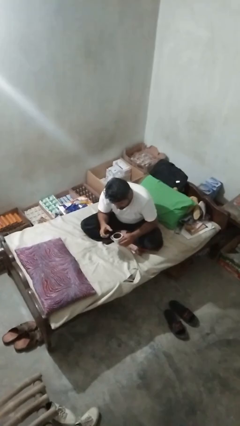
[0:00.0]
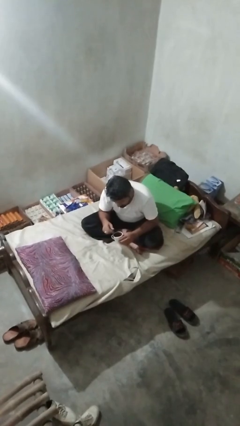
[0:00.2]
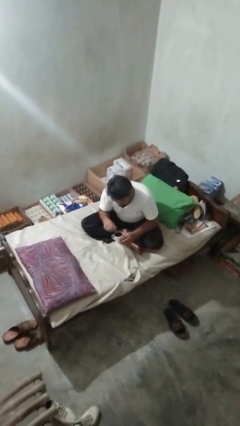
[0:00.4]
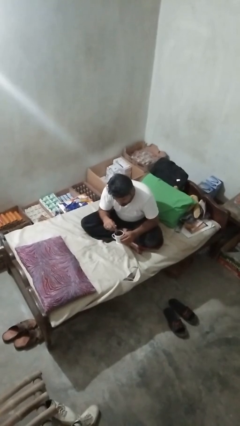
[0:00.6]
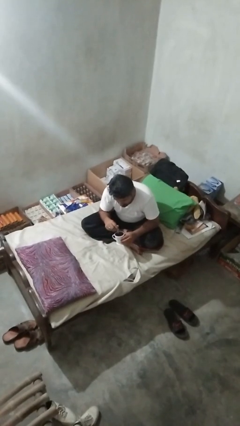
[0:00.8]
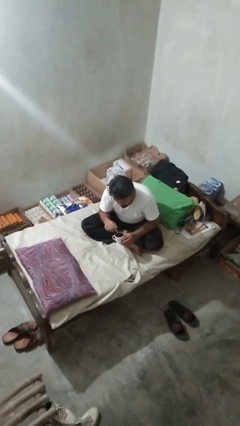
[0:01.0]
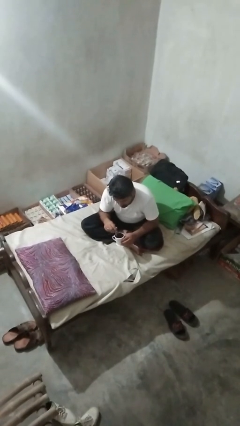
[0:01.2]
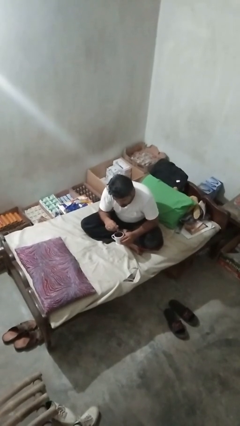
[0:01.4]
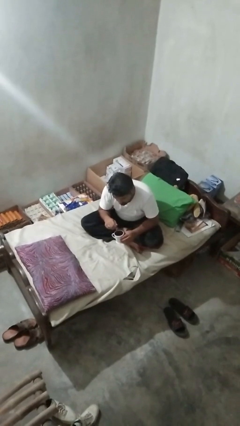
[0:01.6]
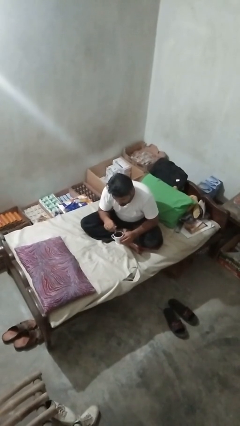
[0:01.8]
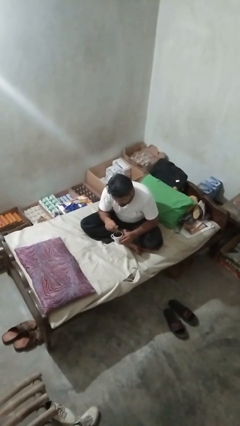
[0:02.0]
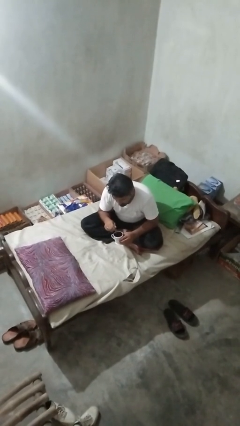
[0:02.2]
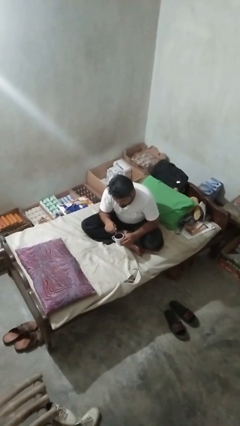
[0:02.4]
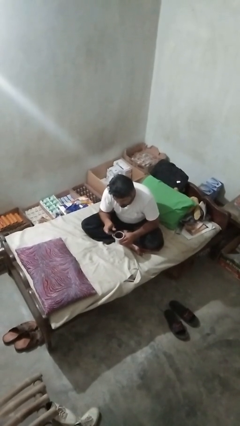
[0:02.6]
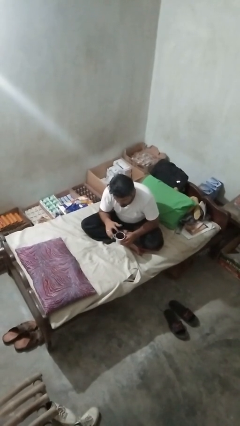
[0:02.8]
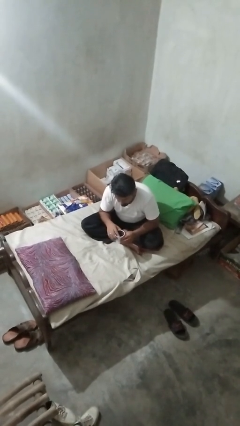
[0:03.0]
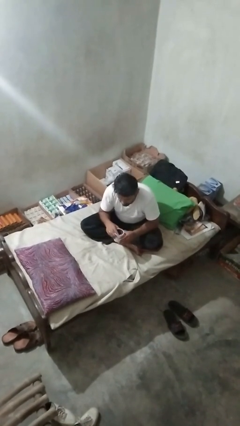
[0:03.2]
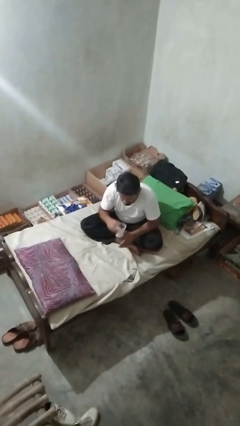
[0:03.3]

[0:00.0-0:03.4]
person stirs mug

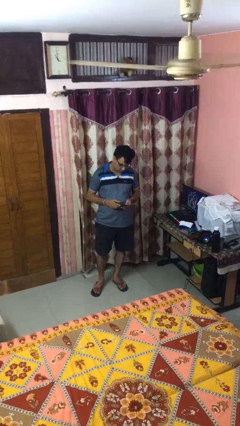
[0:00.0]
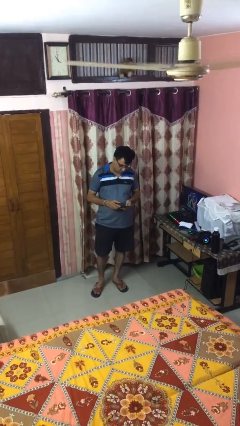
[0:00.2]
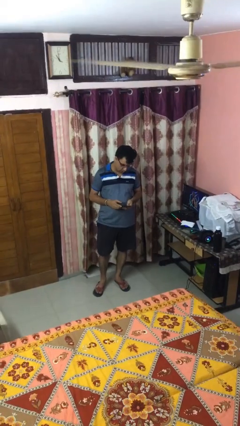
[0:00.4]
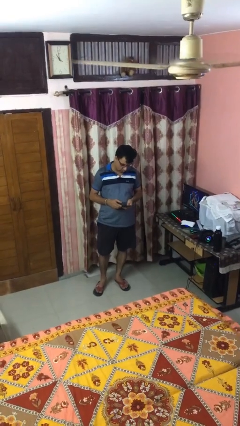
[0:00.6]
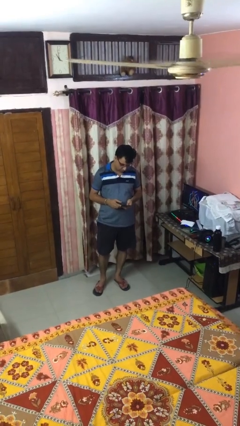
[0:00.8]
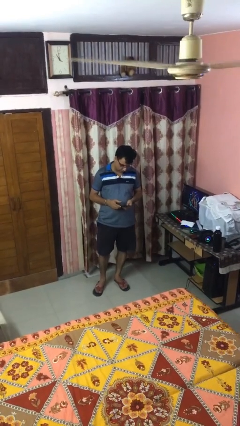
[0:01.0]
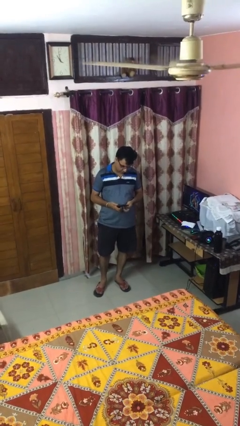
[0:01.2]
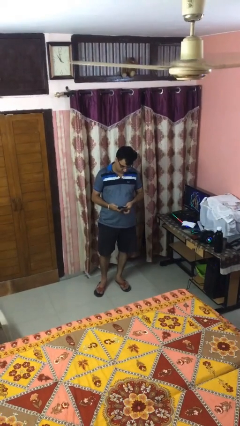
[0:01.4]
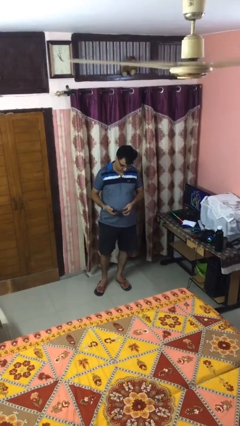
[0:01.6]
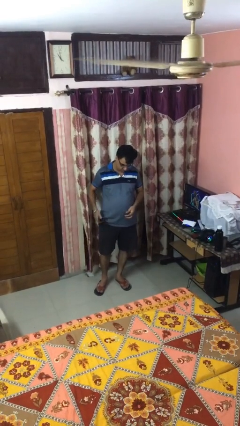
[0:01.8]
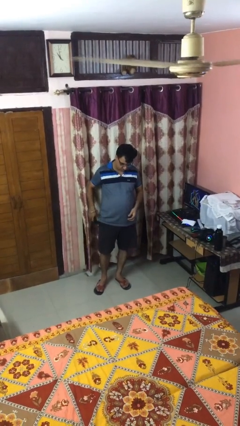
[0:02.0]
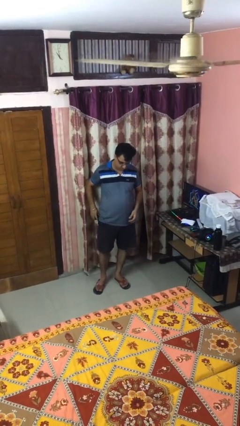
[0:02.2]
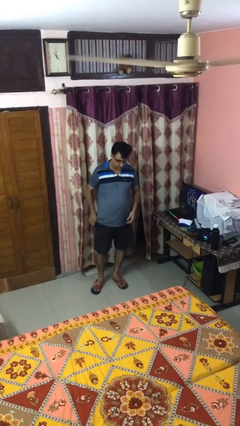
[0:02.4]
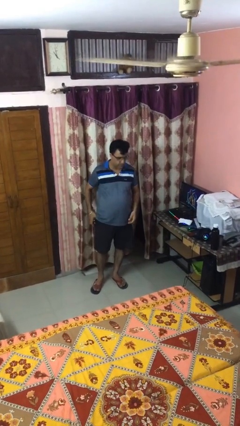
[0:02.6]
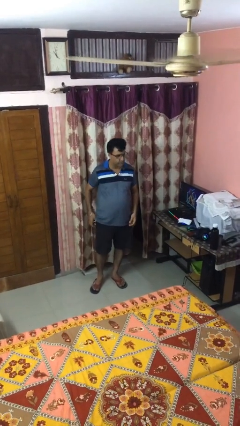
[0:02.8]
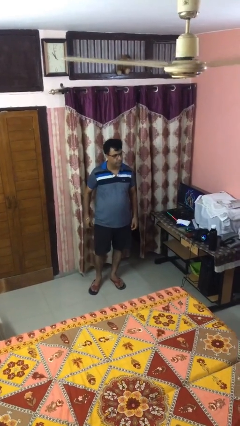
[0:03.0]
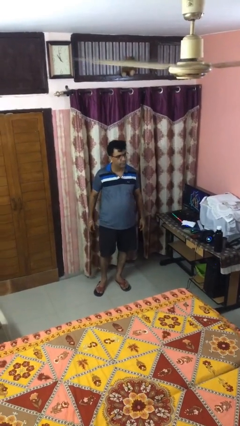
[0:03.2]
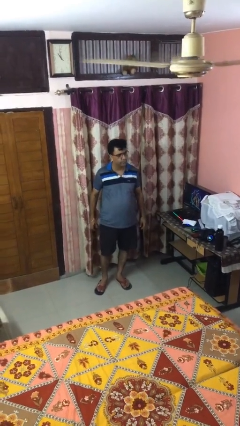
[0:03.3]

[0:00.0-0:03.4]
person puts phone into pocket

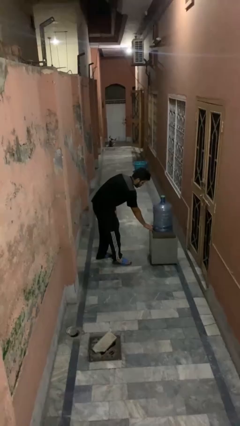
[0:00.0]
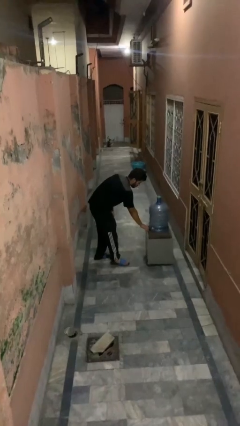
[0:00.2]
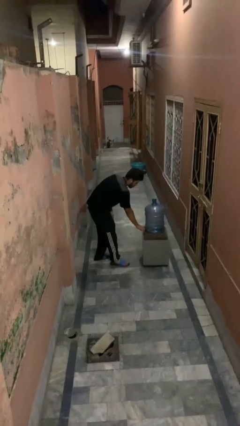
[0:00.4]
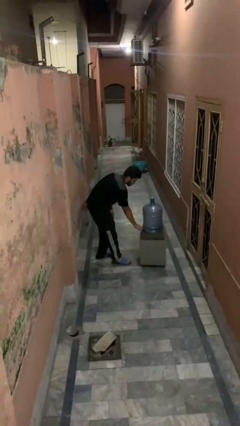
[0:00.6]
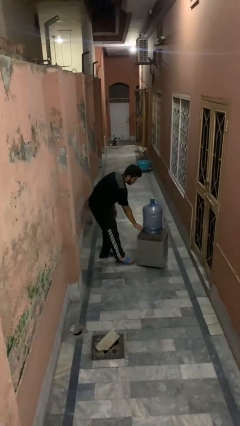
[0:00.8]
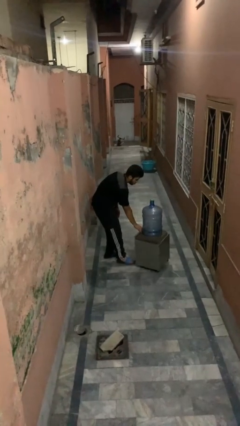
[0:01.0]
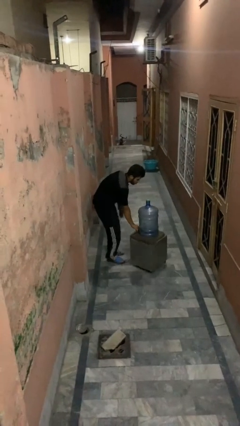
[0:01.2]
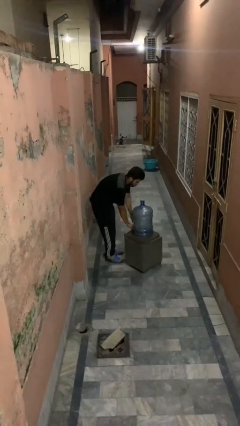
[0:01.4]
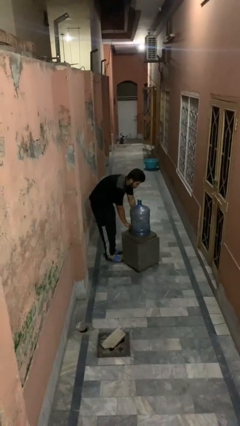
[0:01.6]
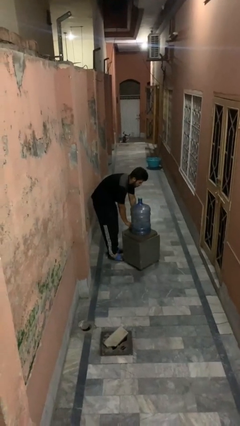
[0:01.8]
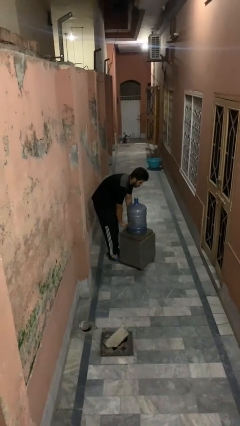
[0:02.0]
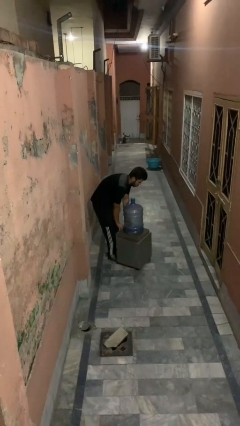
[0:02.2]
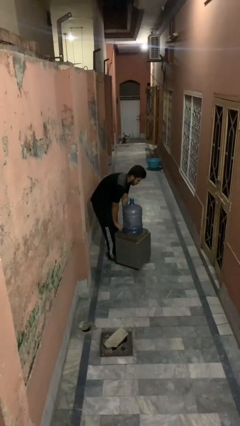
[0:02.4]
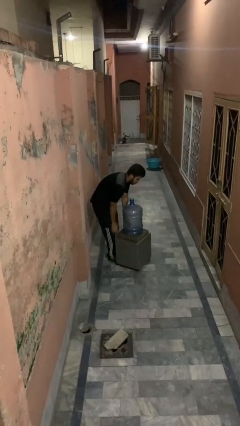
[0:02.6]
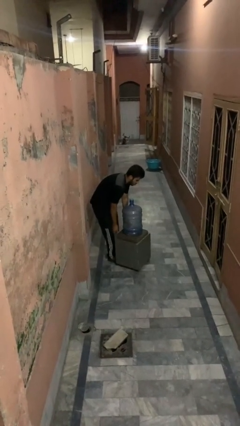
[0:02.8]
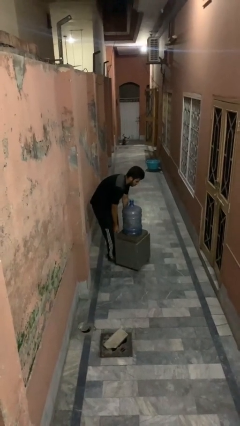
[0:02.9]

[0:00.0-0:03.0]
person pulls wheeled cart

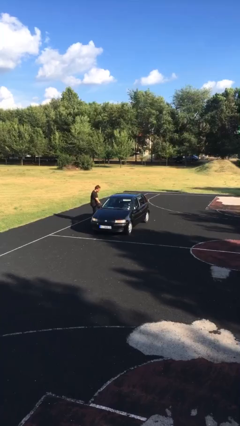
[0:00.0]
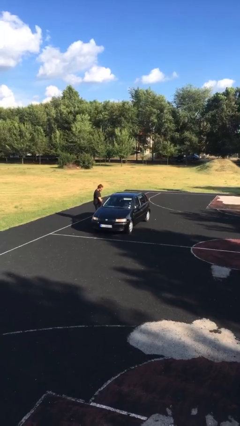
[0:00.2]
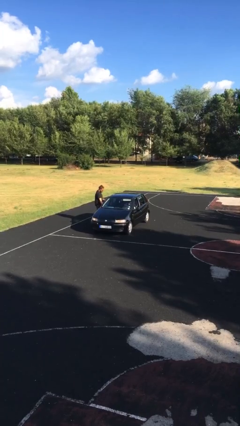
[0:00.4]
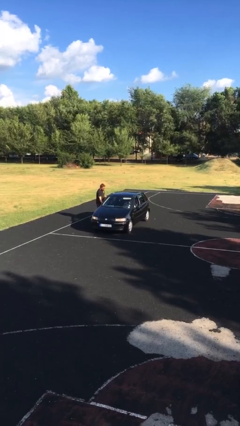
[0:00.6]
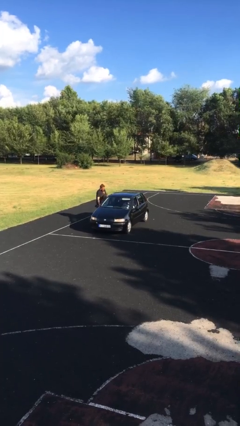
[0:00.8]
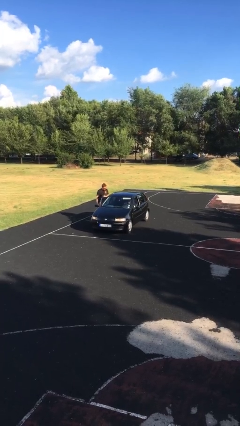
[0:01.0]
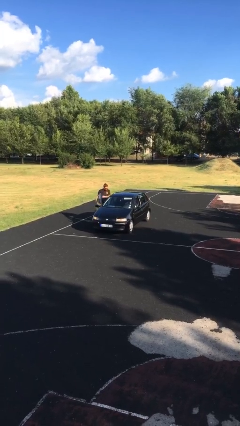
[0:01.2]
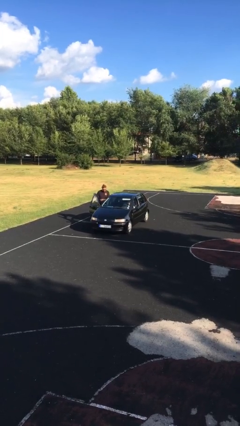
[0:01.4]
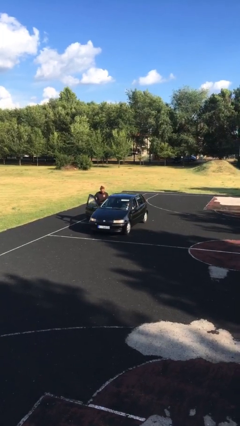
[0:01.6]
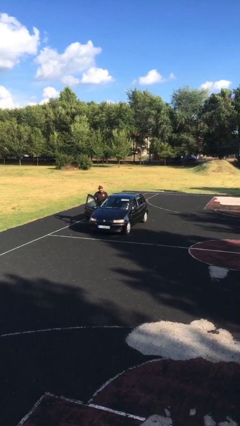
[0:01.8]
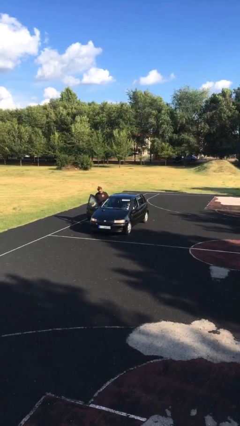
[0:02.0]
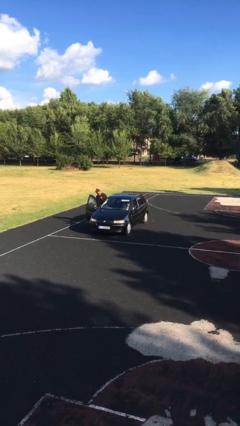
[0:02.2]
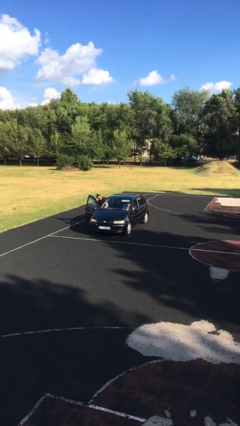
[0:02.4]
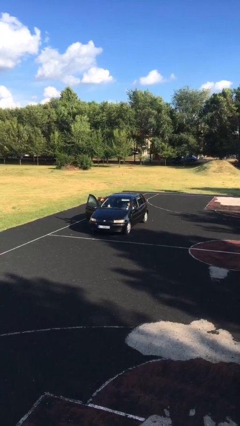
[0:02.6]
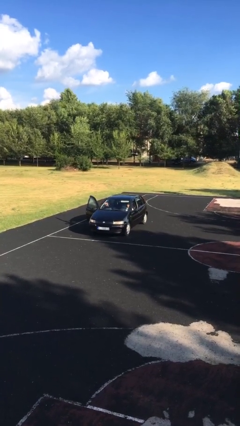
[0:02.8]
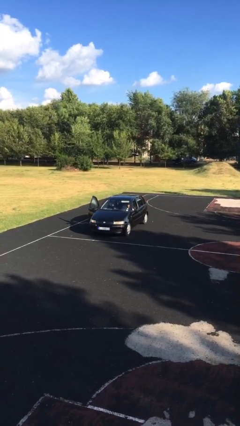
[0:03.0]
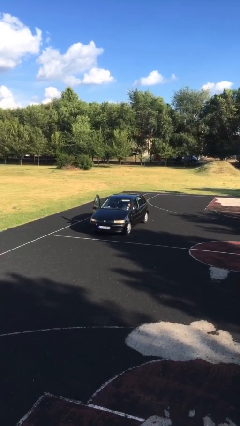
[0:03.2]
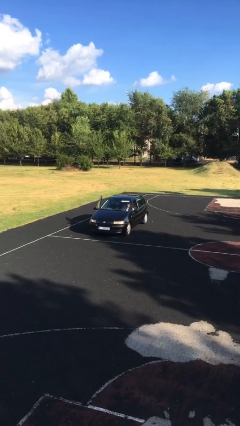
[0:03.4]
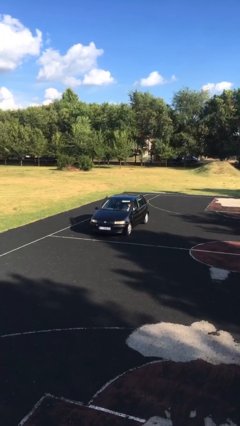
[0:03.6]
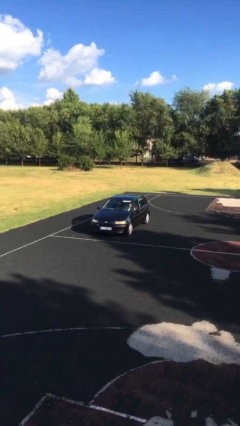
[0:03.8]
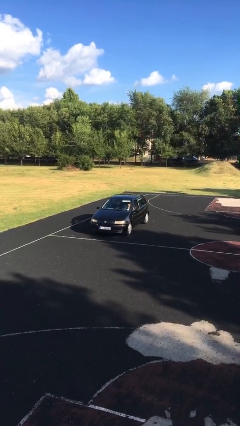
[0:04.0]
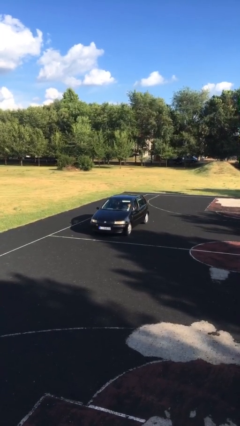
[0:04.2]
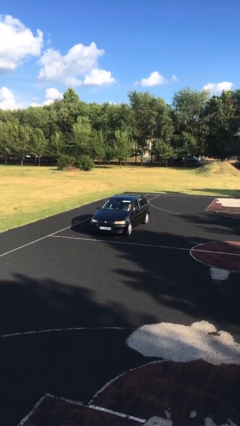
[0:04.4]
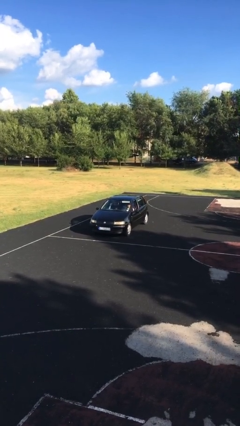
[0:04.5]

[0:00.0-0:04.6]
car picks up person

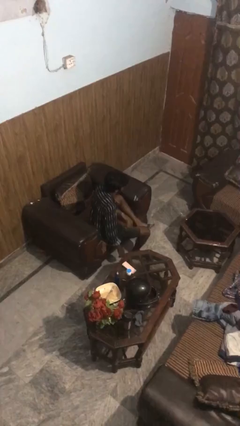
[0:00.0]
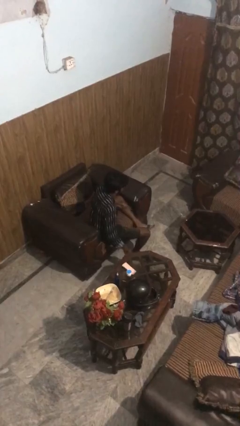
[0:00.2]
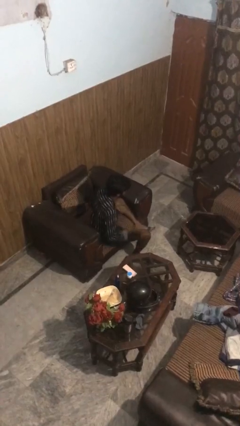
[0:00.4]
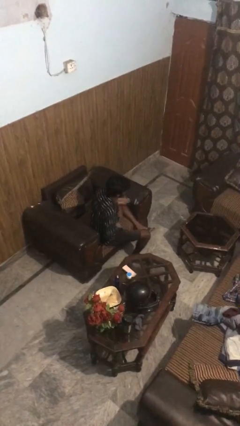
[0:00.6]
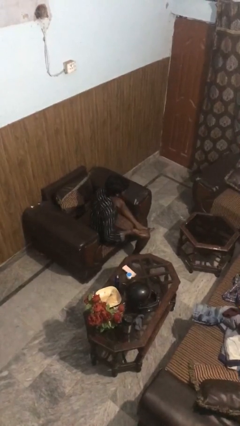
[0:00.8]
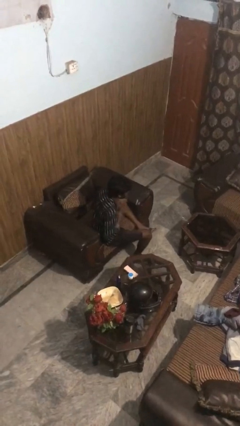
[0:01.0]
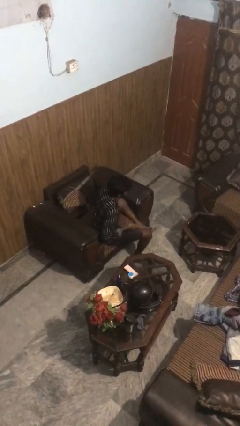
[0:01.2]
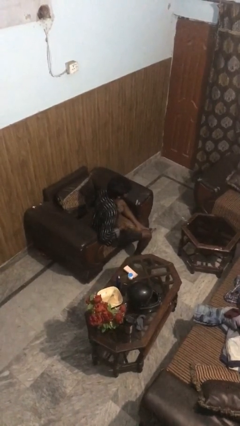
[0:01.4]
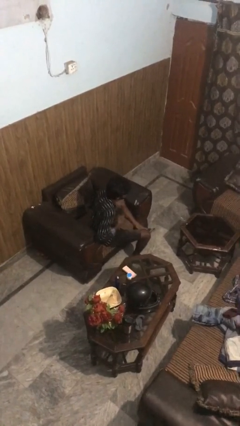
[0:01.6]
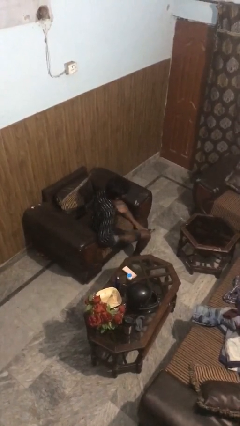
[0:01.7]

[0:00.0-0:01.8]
person drums on chest

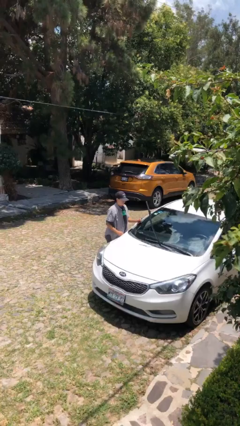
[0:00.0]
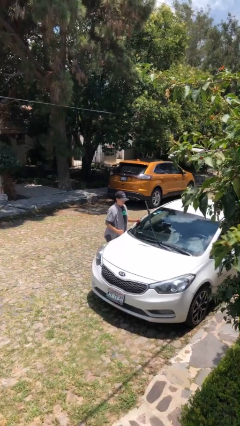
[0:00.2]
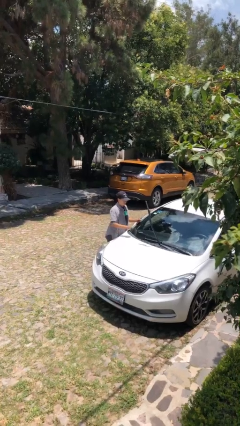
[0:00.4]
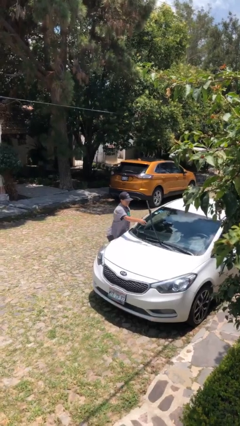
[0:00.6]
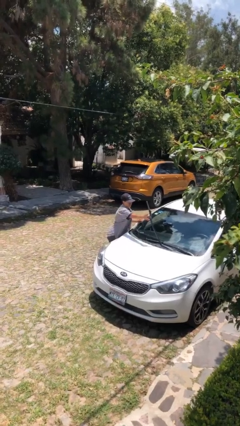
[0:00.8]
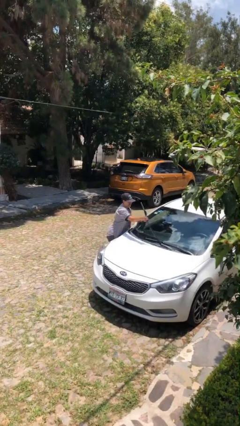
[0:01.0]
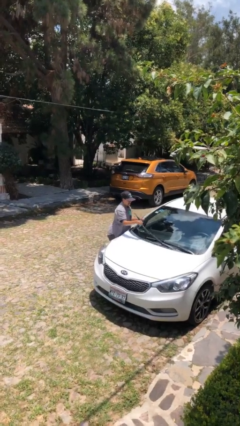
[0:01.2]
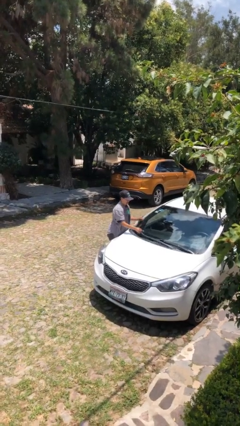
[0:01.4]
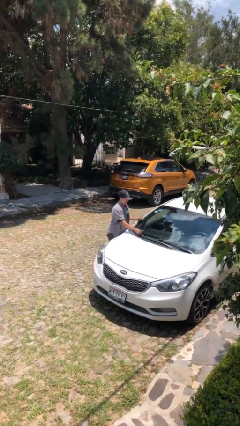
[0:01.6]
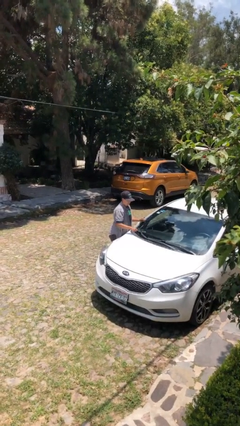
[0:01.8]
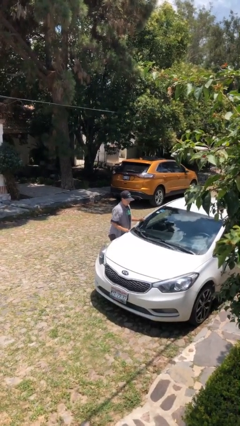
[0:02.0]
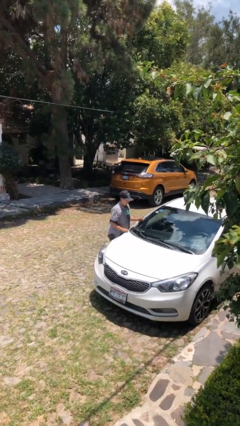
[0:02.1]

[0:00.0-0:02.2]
person flips down car wipers
